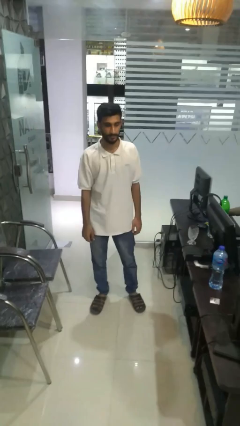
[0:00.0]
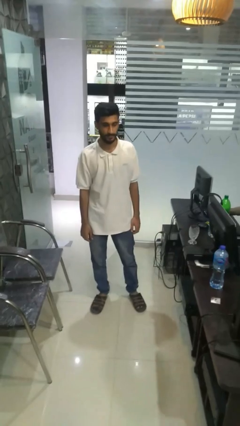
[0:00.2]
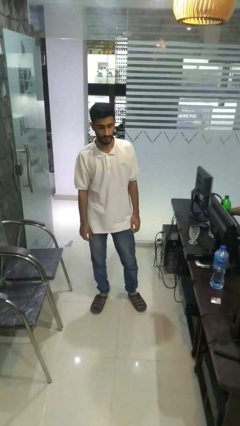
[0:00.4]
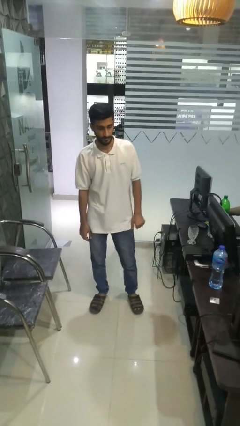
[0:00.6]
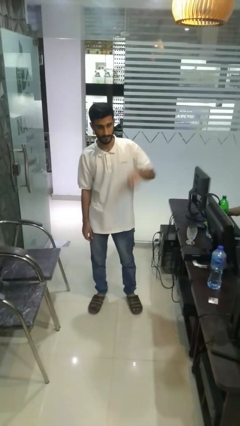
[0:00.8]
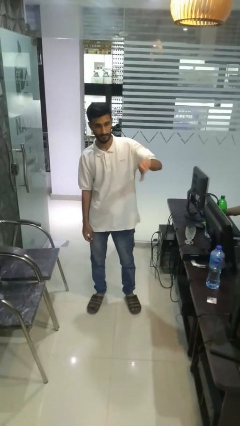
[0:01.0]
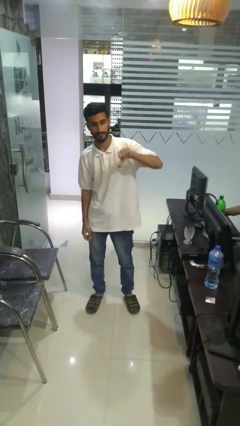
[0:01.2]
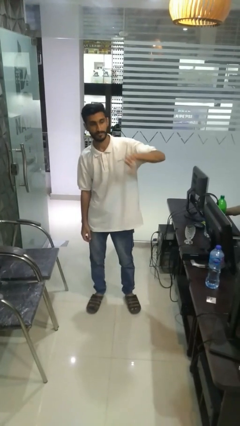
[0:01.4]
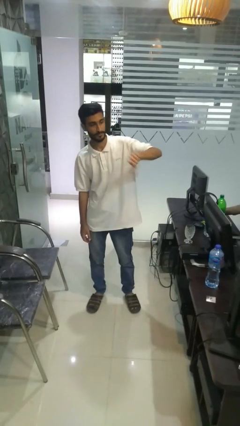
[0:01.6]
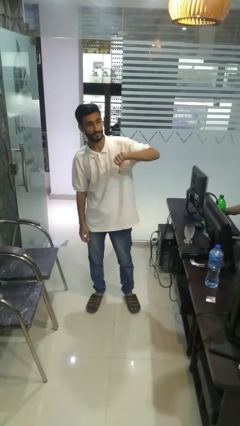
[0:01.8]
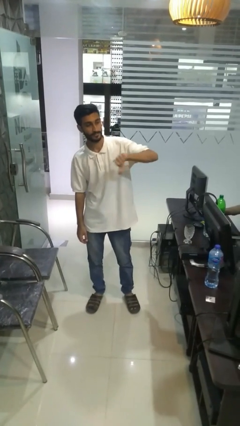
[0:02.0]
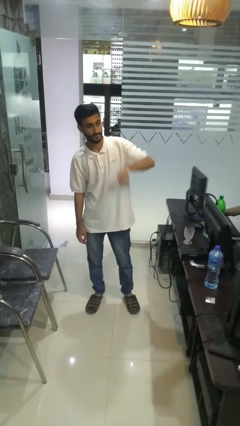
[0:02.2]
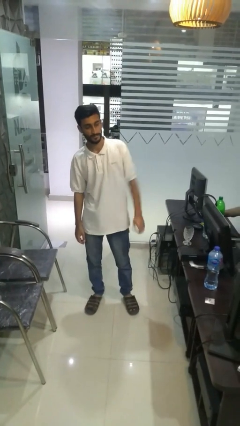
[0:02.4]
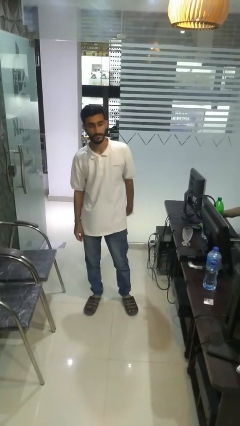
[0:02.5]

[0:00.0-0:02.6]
person gestures thumbs down

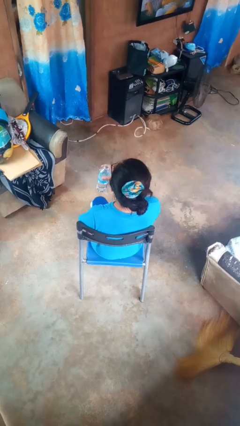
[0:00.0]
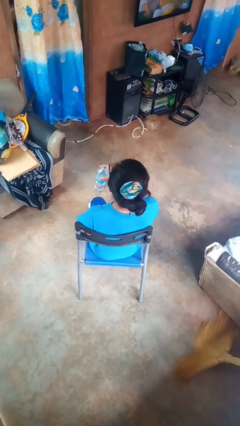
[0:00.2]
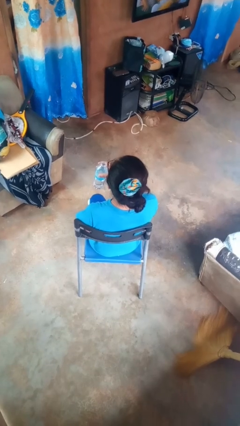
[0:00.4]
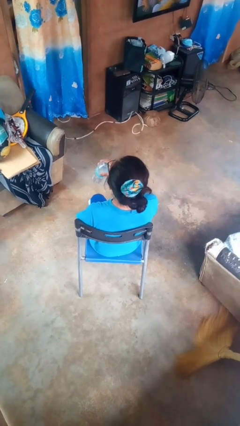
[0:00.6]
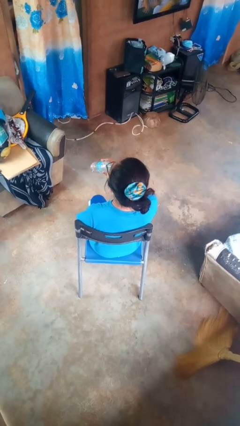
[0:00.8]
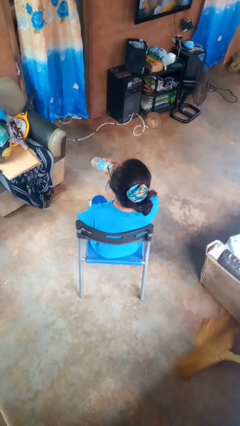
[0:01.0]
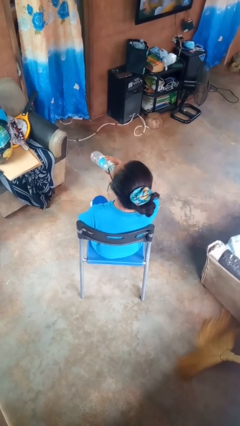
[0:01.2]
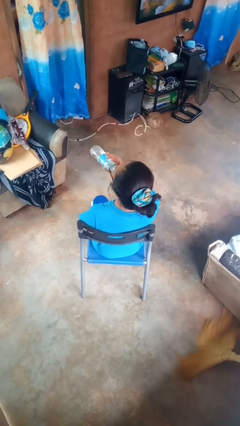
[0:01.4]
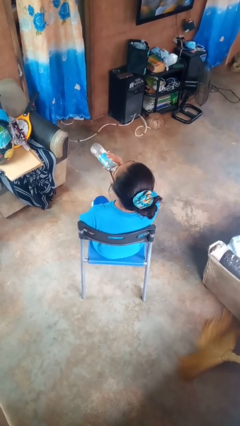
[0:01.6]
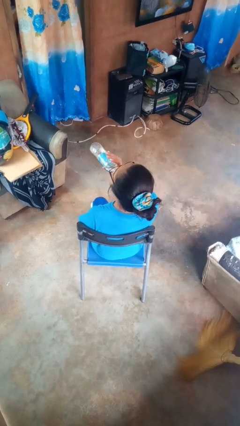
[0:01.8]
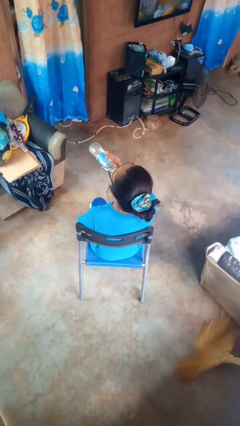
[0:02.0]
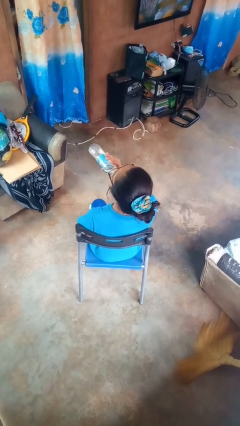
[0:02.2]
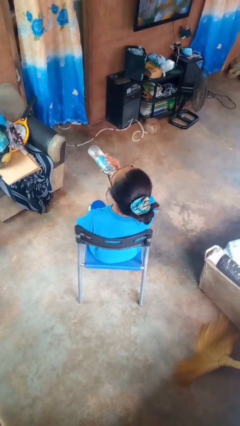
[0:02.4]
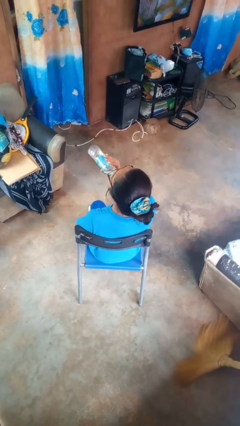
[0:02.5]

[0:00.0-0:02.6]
person drinks from bottle

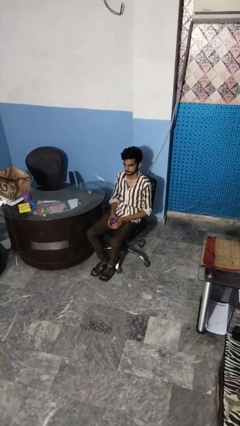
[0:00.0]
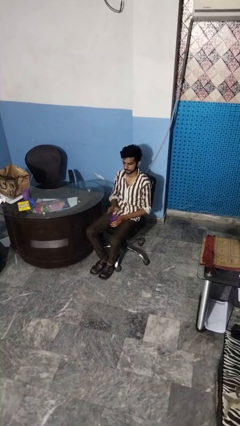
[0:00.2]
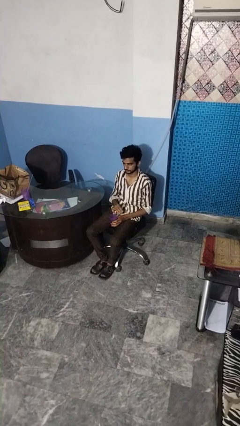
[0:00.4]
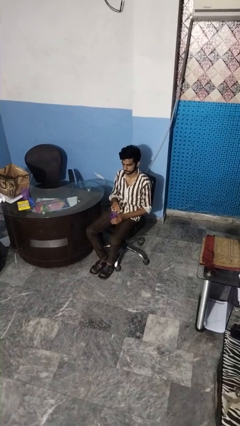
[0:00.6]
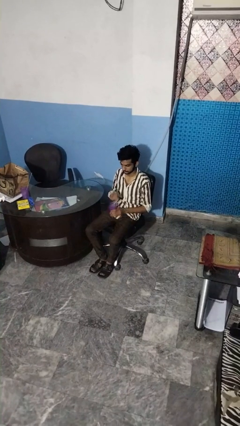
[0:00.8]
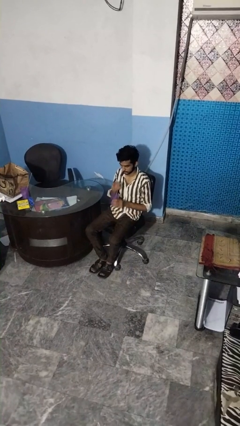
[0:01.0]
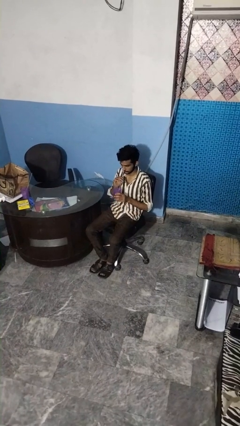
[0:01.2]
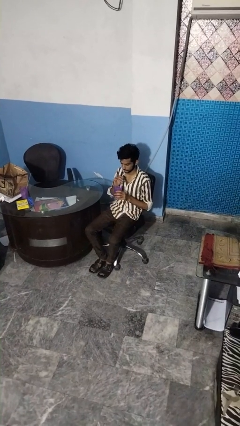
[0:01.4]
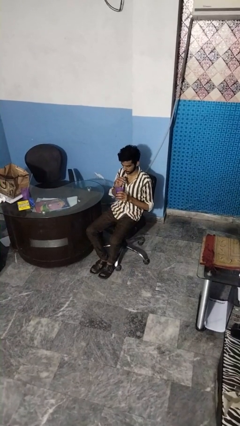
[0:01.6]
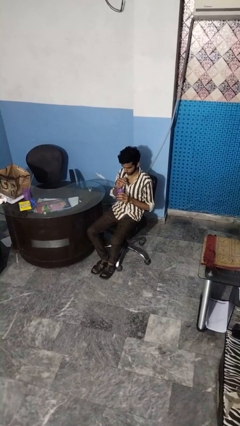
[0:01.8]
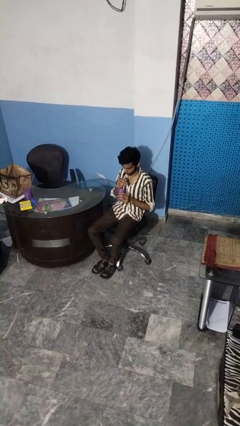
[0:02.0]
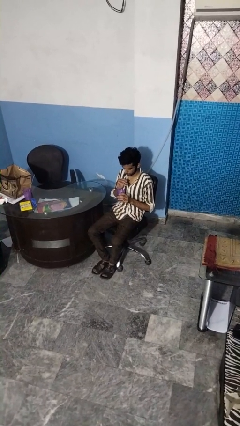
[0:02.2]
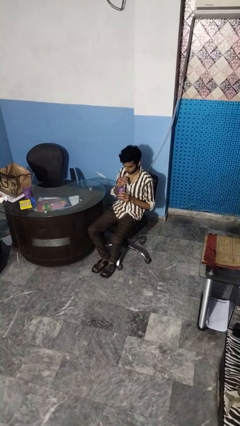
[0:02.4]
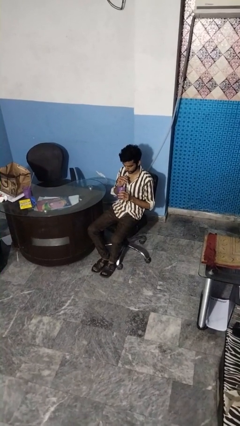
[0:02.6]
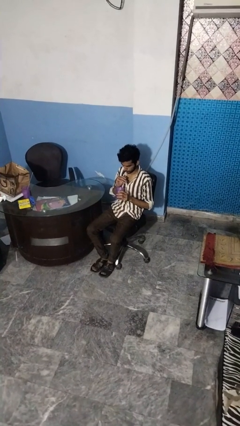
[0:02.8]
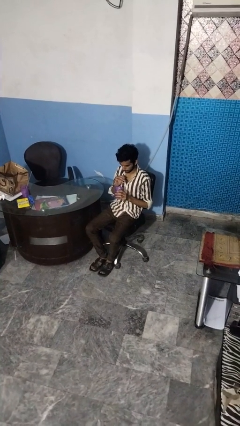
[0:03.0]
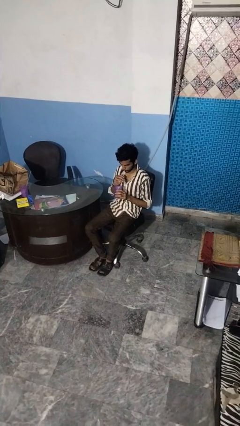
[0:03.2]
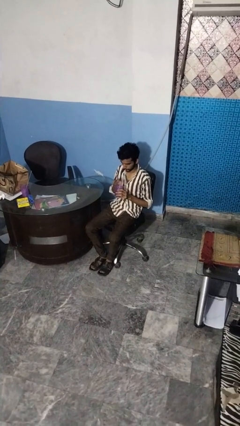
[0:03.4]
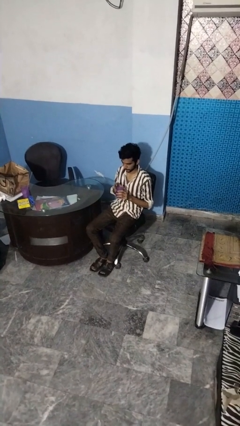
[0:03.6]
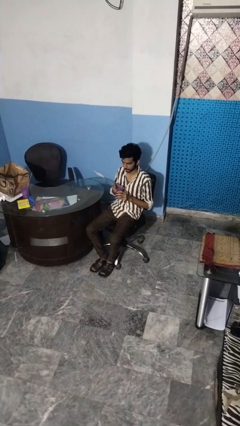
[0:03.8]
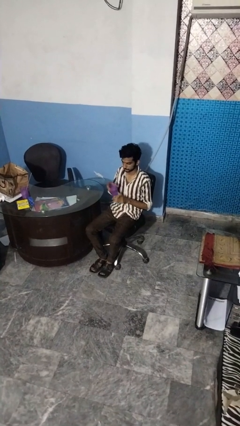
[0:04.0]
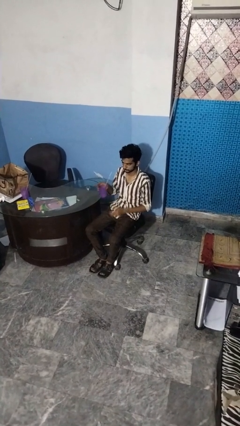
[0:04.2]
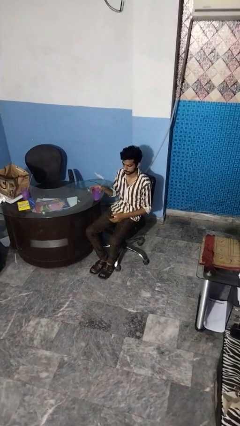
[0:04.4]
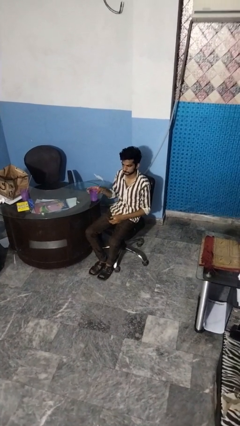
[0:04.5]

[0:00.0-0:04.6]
person drinks from straw

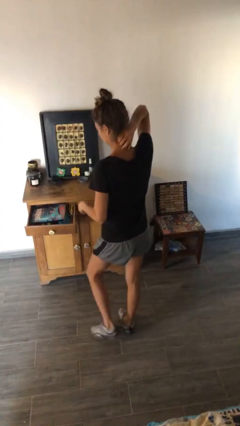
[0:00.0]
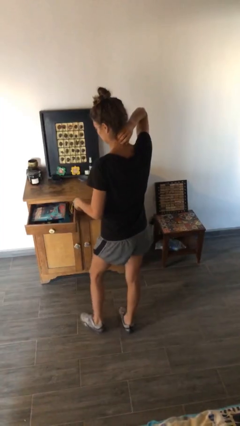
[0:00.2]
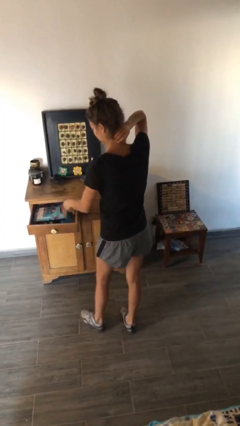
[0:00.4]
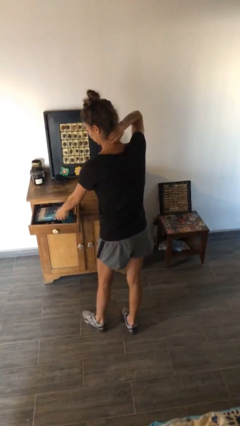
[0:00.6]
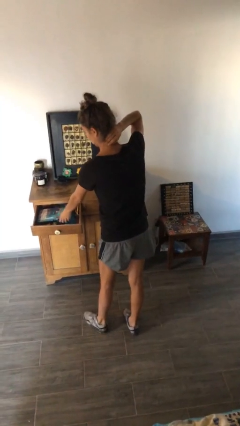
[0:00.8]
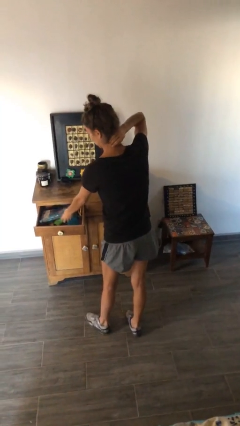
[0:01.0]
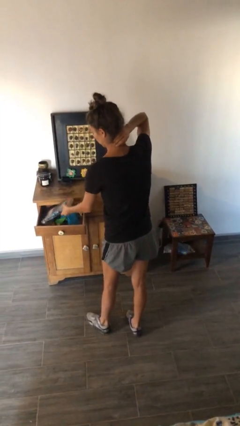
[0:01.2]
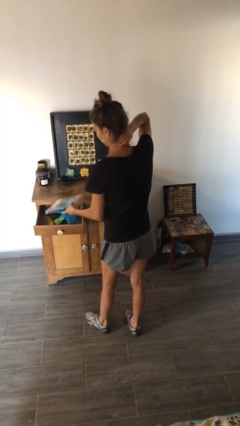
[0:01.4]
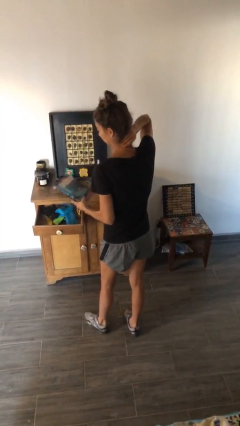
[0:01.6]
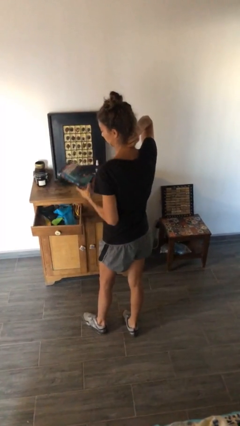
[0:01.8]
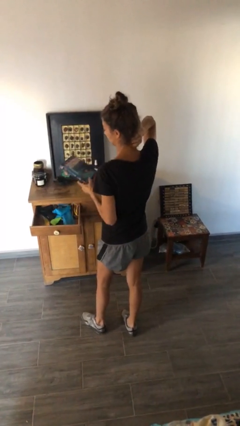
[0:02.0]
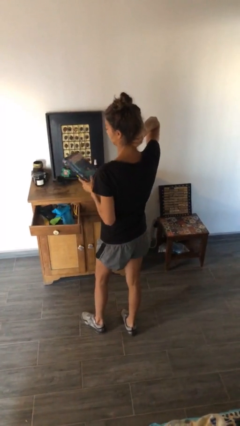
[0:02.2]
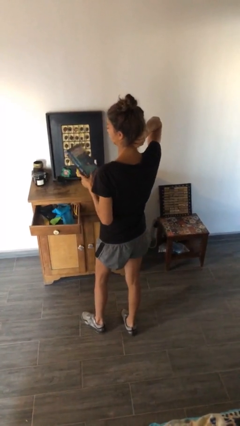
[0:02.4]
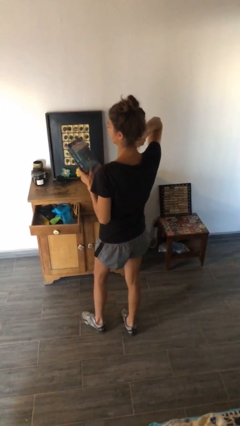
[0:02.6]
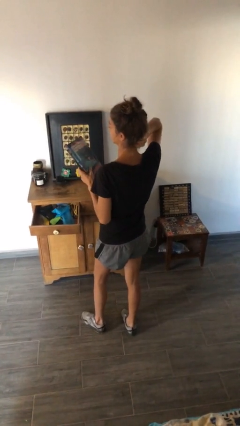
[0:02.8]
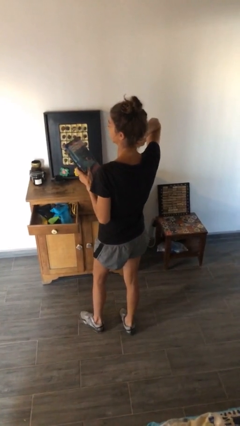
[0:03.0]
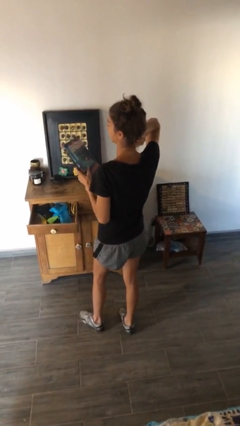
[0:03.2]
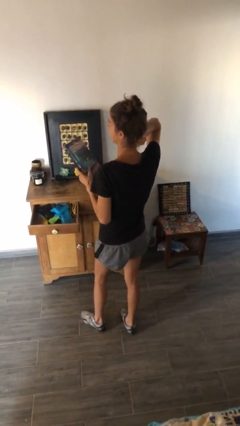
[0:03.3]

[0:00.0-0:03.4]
person picks up object from cabinet

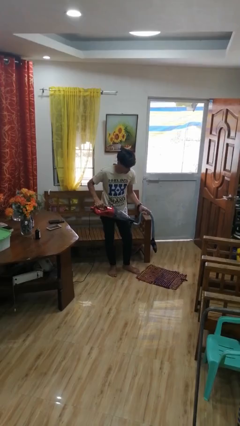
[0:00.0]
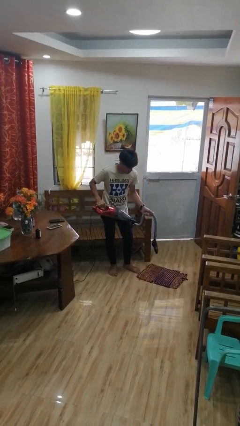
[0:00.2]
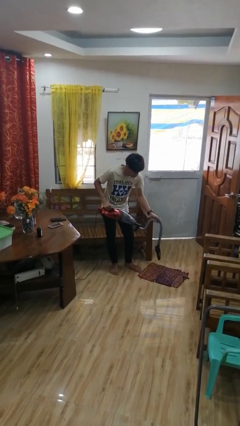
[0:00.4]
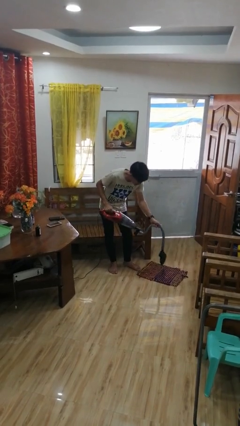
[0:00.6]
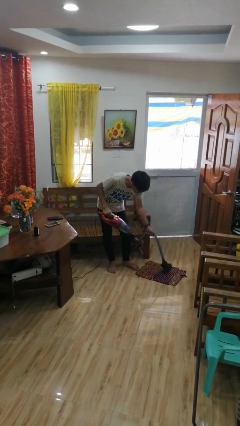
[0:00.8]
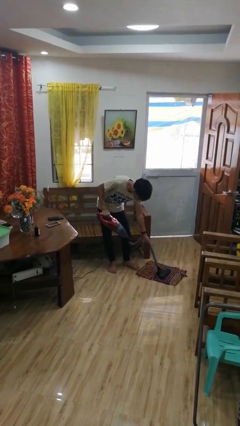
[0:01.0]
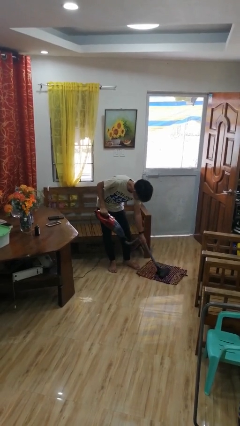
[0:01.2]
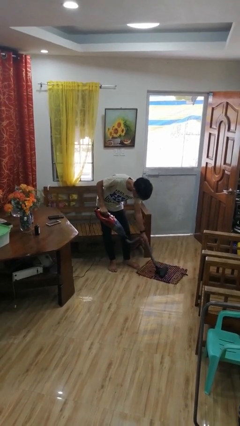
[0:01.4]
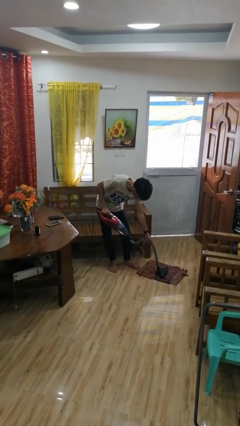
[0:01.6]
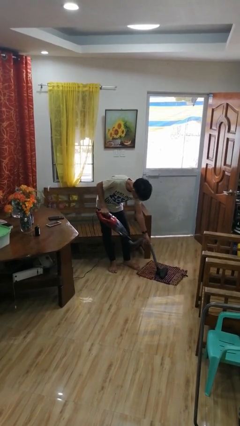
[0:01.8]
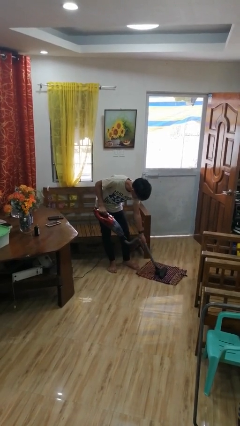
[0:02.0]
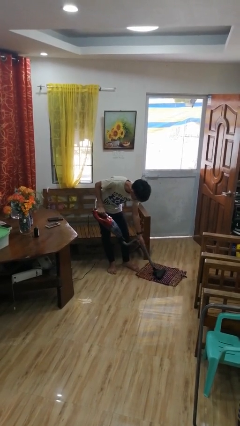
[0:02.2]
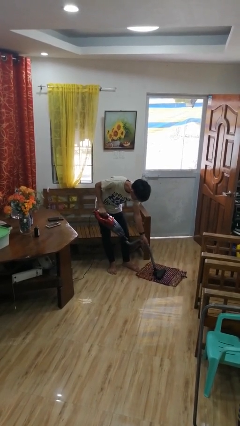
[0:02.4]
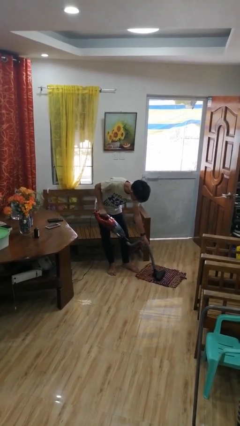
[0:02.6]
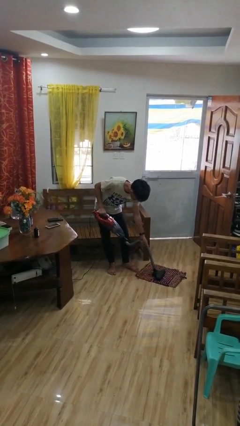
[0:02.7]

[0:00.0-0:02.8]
person vacuums carpet

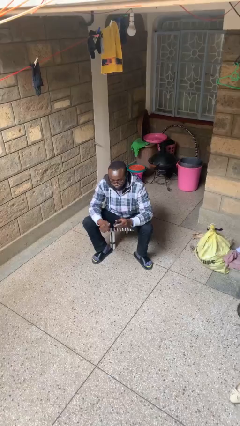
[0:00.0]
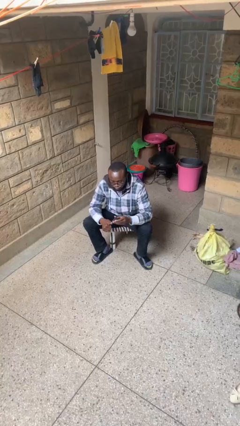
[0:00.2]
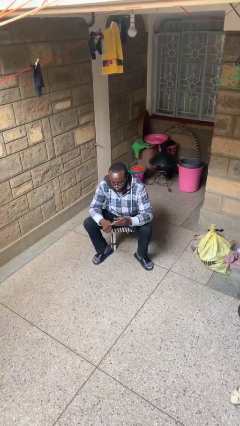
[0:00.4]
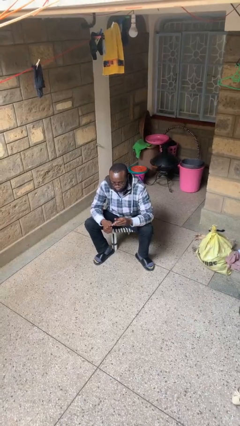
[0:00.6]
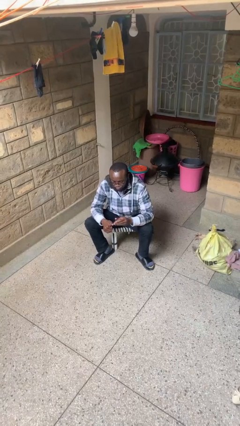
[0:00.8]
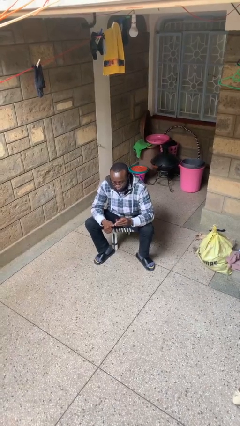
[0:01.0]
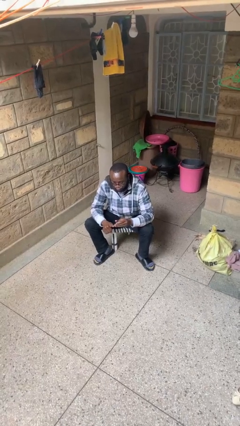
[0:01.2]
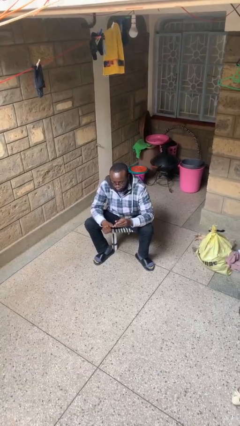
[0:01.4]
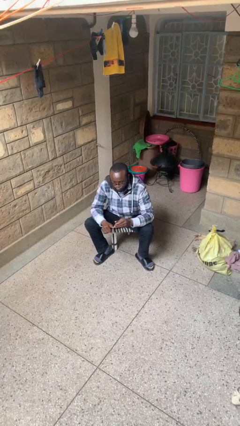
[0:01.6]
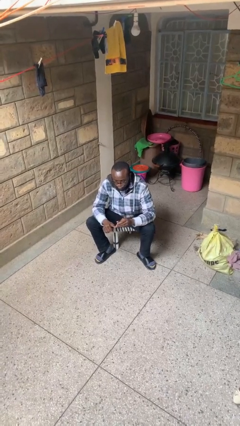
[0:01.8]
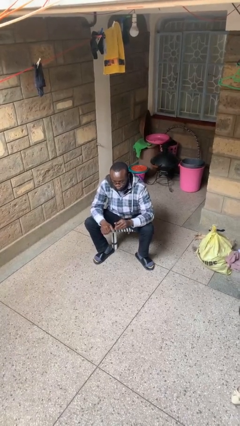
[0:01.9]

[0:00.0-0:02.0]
person clips fingernails
